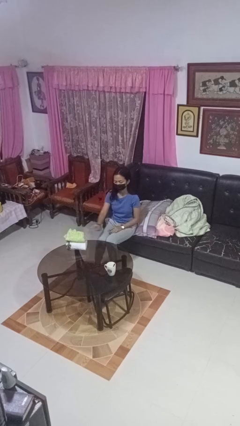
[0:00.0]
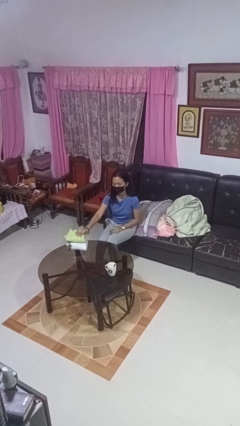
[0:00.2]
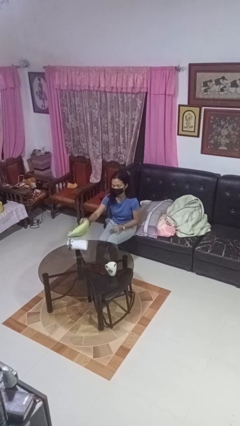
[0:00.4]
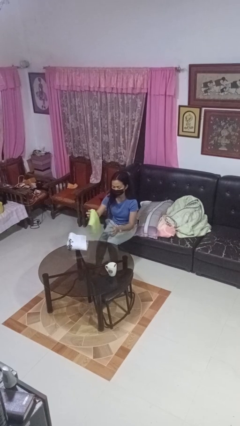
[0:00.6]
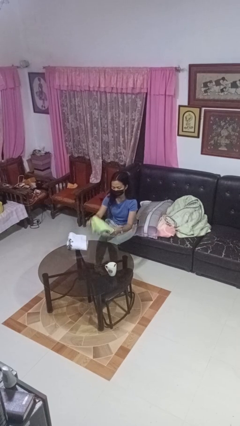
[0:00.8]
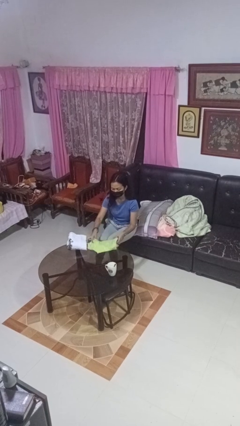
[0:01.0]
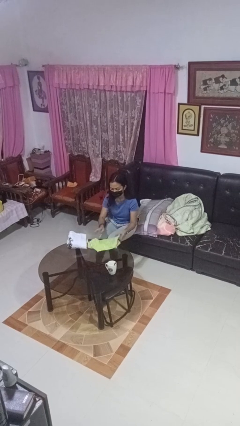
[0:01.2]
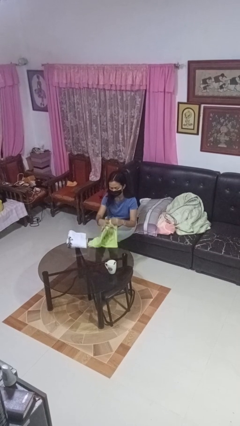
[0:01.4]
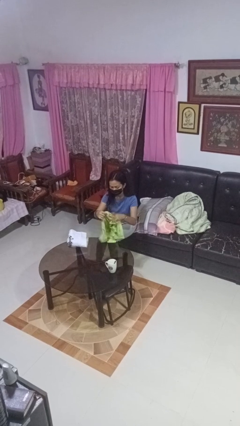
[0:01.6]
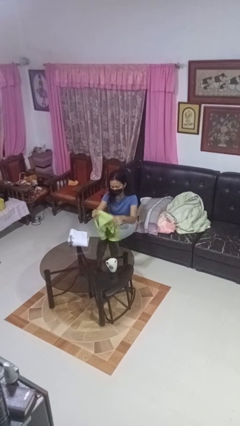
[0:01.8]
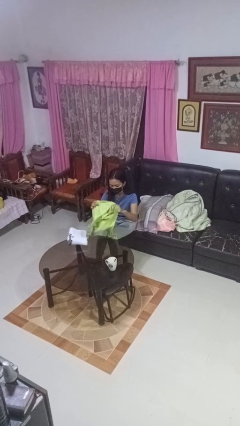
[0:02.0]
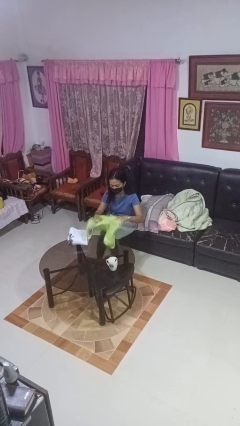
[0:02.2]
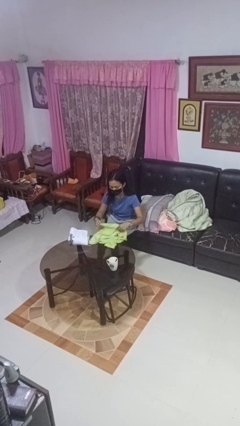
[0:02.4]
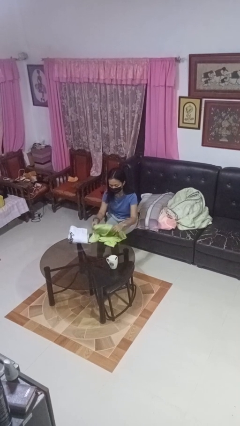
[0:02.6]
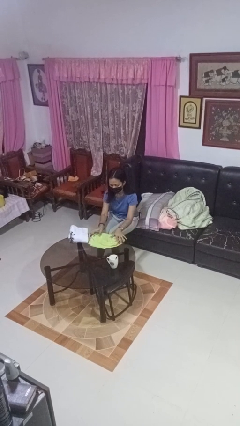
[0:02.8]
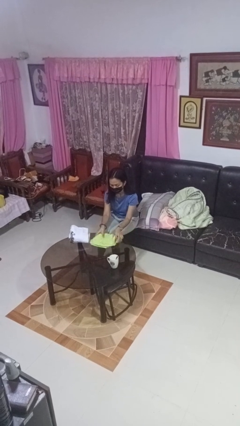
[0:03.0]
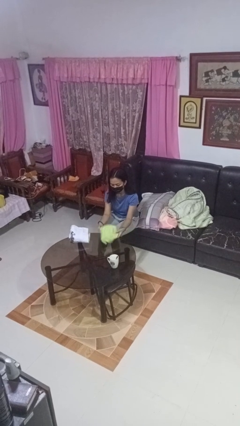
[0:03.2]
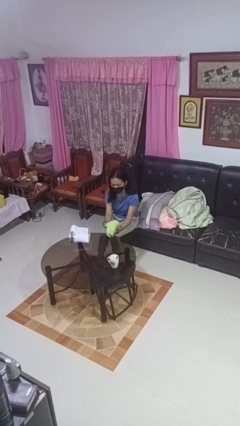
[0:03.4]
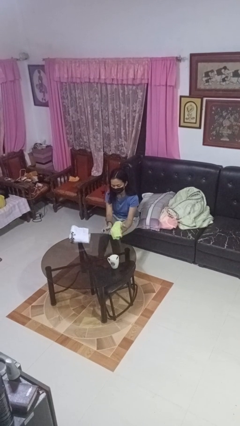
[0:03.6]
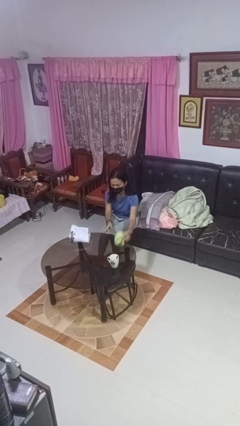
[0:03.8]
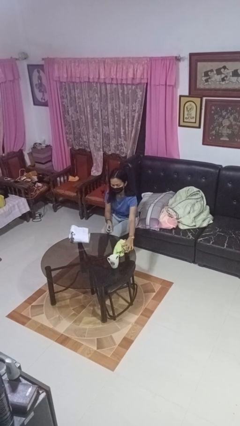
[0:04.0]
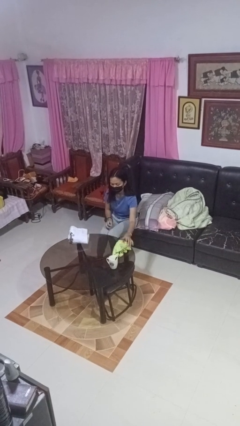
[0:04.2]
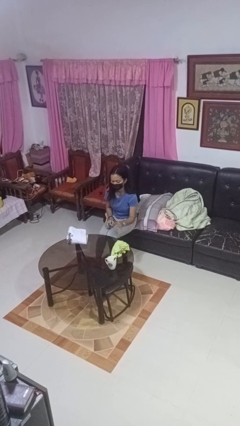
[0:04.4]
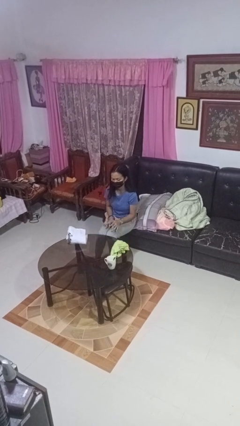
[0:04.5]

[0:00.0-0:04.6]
person folds towel

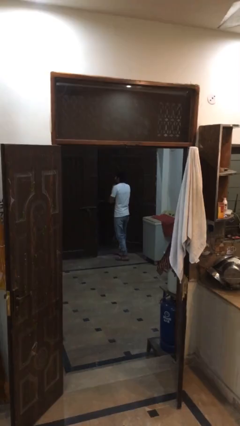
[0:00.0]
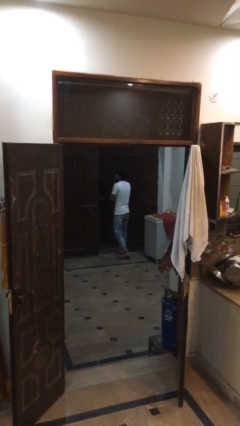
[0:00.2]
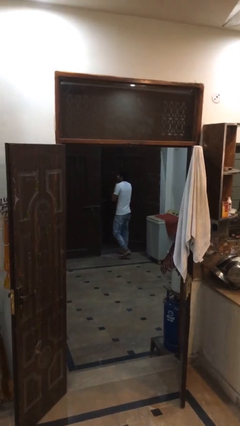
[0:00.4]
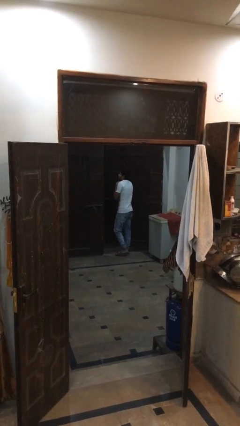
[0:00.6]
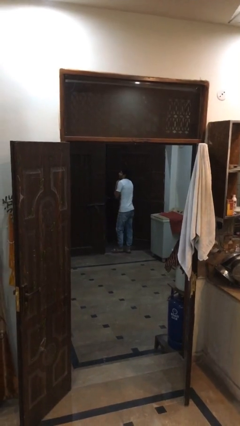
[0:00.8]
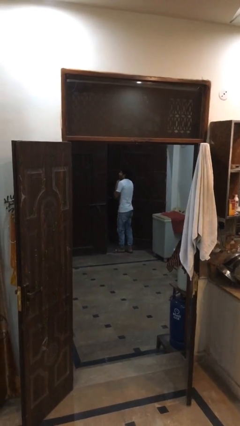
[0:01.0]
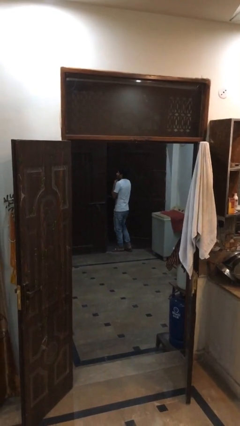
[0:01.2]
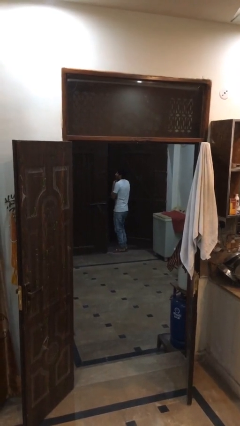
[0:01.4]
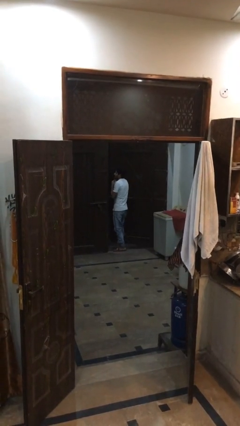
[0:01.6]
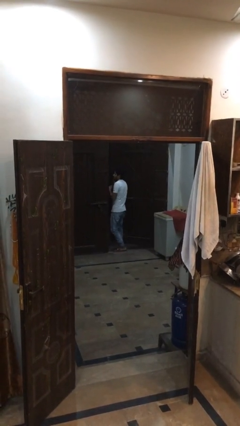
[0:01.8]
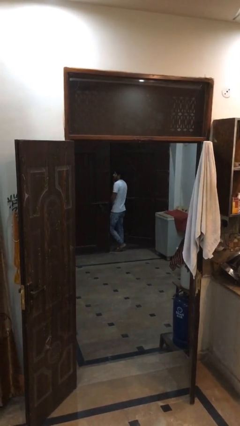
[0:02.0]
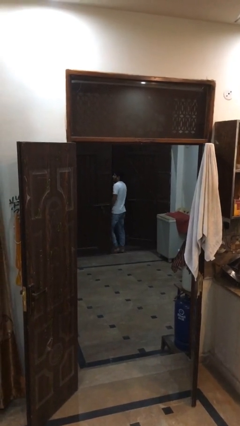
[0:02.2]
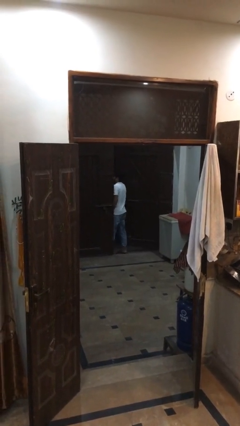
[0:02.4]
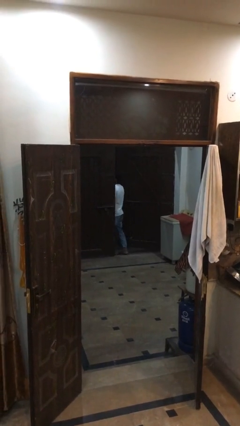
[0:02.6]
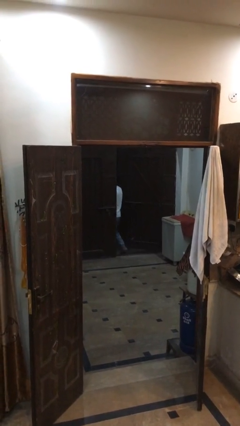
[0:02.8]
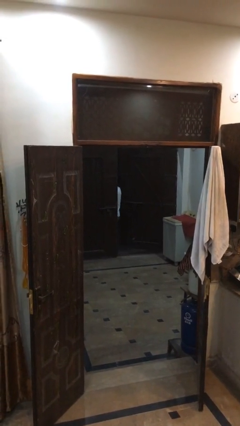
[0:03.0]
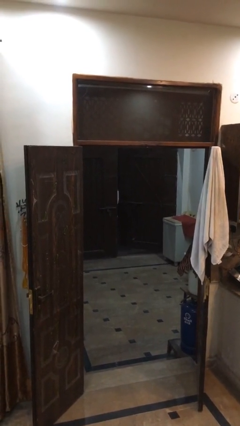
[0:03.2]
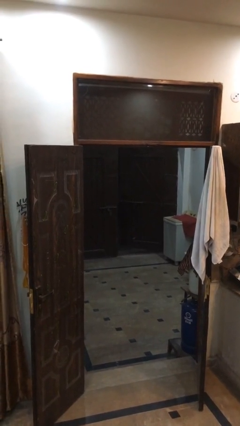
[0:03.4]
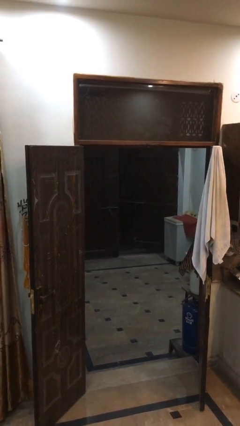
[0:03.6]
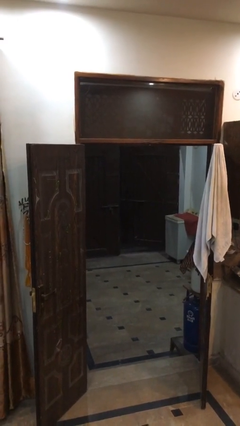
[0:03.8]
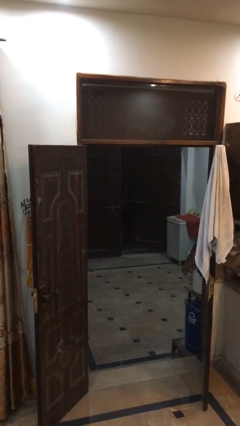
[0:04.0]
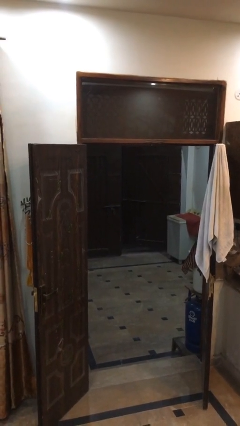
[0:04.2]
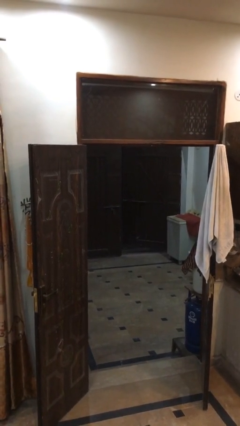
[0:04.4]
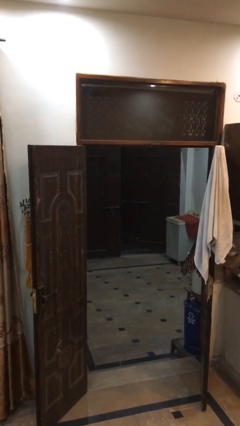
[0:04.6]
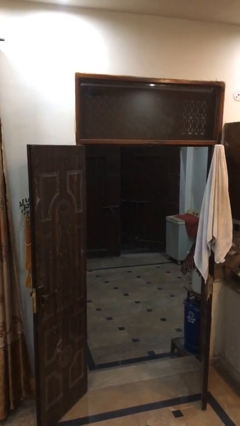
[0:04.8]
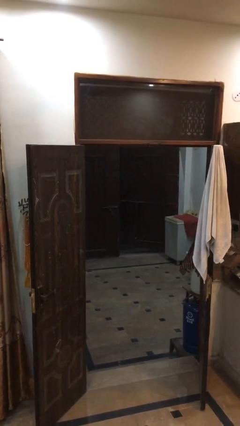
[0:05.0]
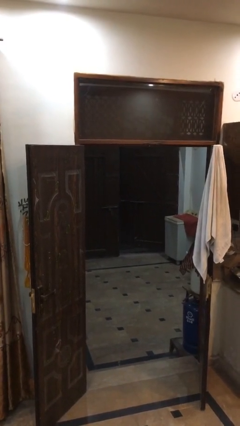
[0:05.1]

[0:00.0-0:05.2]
person exits scene through structure

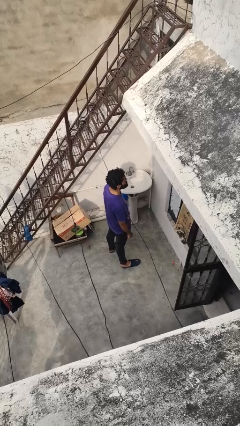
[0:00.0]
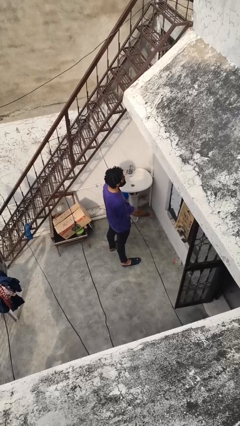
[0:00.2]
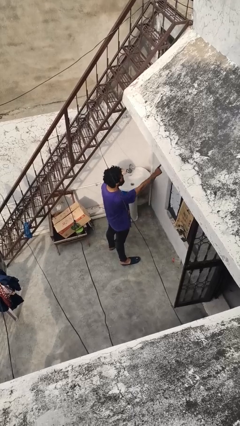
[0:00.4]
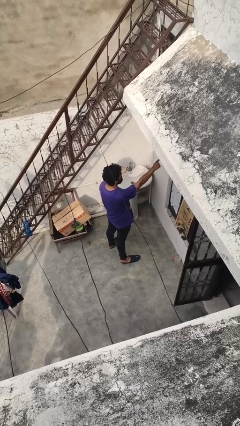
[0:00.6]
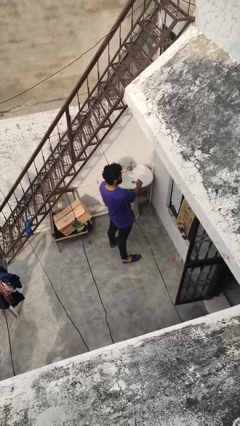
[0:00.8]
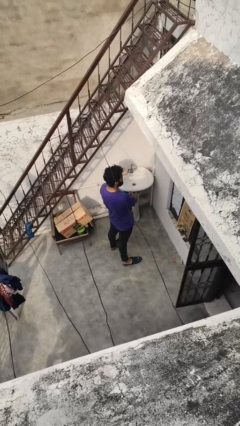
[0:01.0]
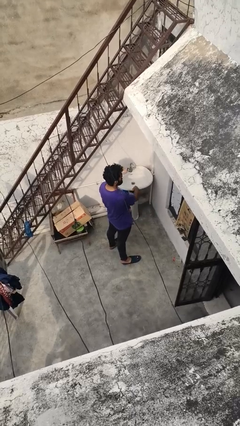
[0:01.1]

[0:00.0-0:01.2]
person gestures behind me

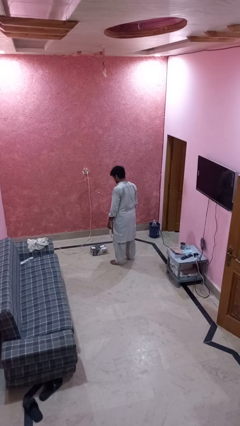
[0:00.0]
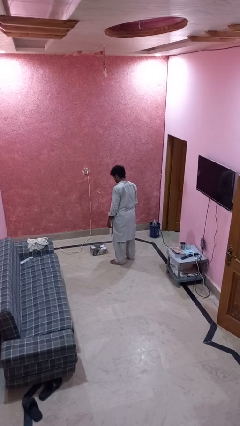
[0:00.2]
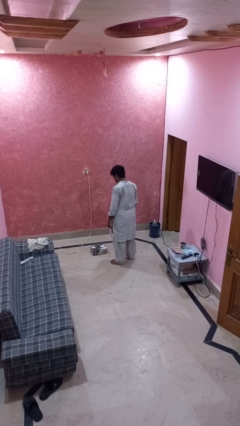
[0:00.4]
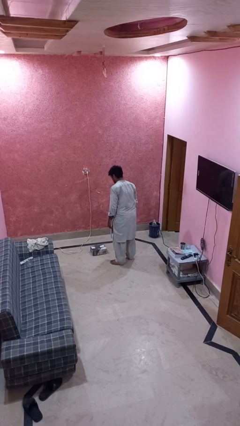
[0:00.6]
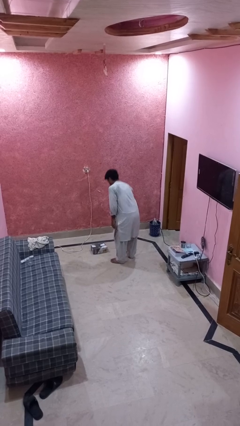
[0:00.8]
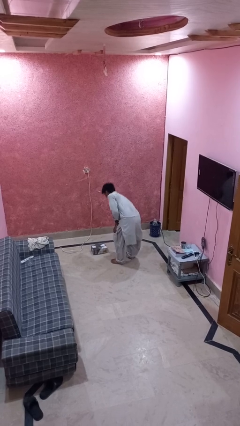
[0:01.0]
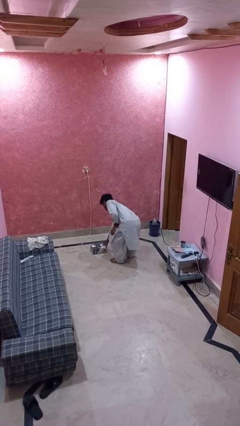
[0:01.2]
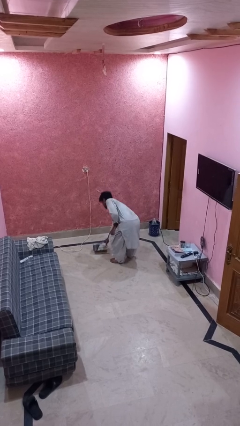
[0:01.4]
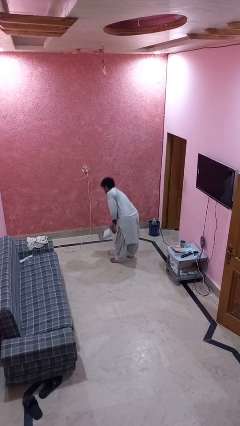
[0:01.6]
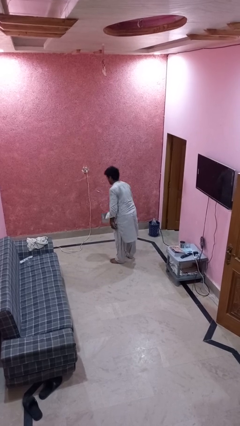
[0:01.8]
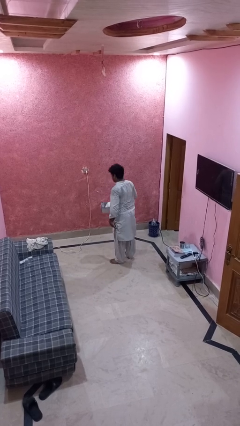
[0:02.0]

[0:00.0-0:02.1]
person picks up object from floor

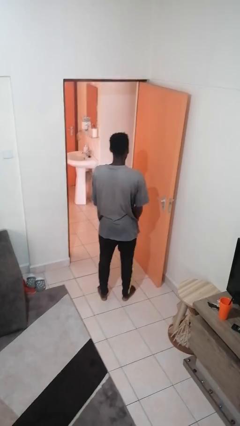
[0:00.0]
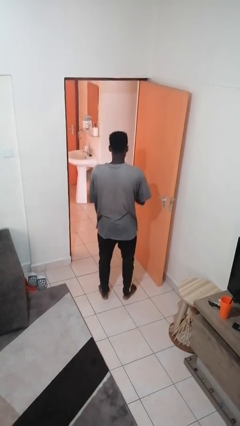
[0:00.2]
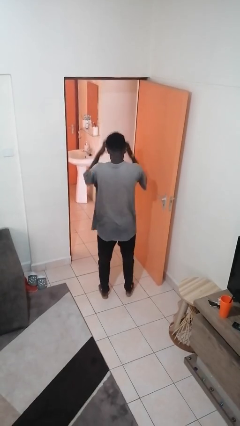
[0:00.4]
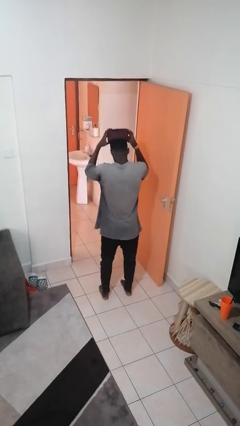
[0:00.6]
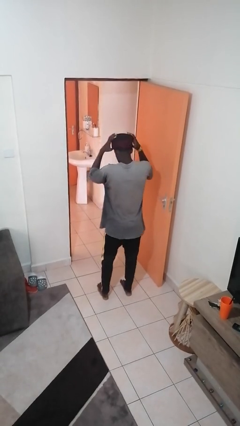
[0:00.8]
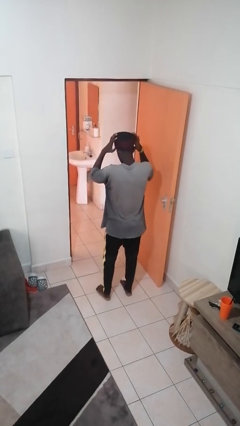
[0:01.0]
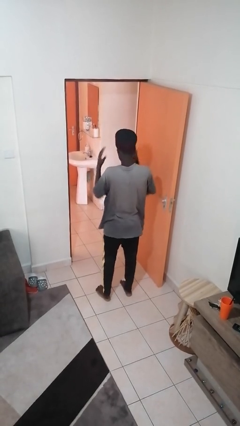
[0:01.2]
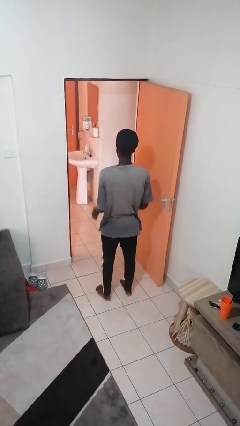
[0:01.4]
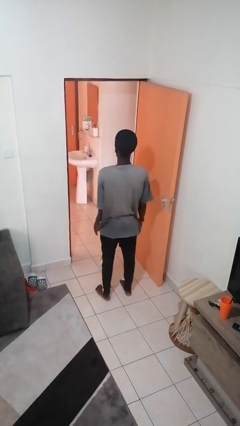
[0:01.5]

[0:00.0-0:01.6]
person puts on hat

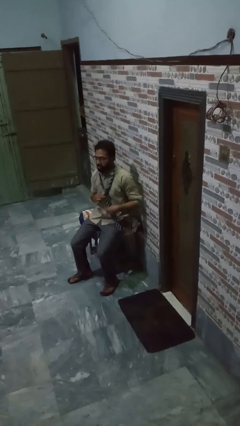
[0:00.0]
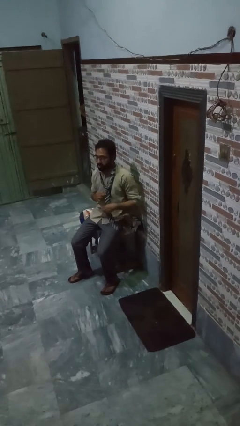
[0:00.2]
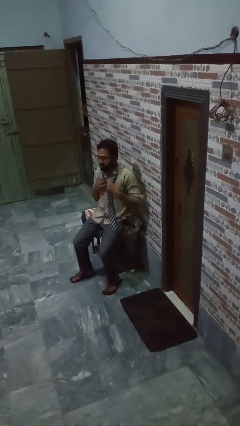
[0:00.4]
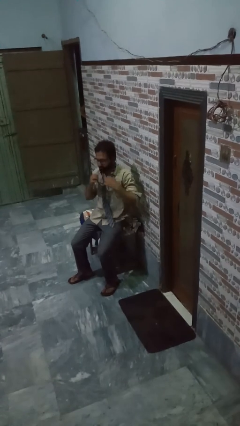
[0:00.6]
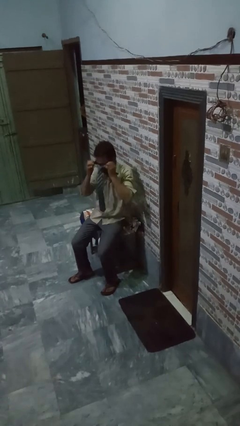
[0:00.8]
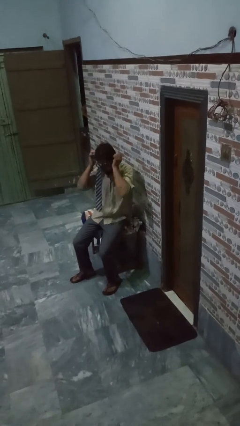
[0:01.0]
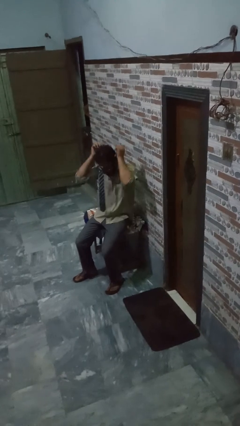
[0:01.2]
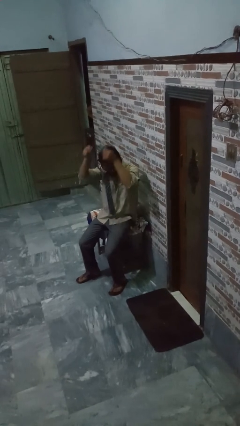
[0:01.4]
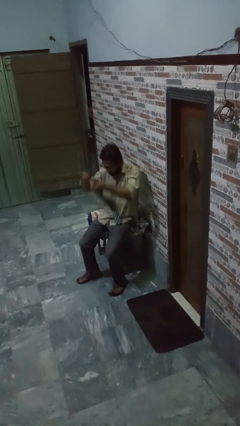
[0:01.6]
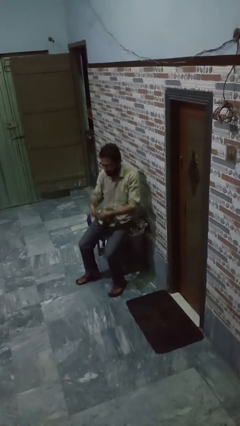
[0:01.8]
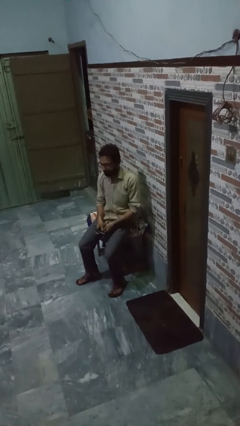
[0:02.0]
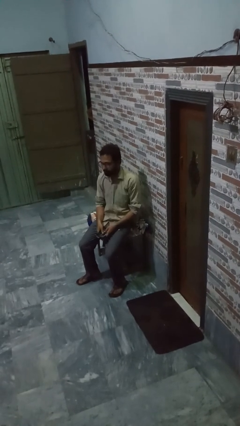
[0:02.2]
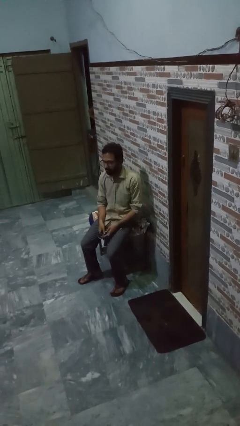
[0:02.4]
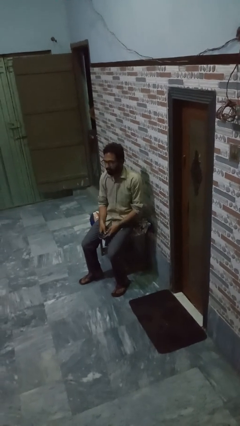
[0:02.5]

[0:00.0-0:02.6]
person takes off necktie

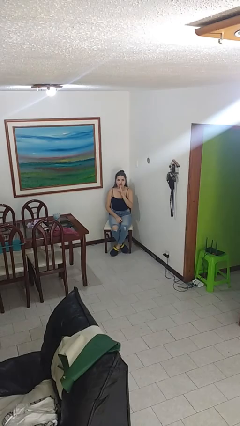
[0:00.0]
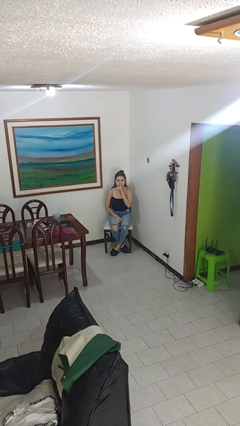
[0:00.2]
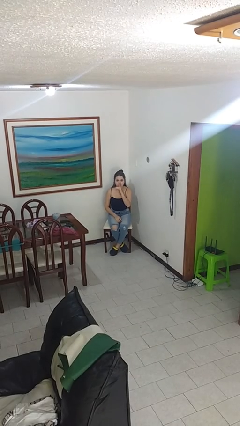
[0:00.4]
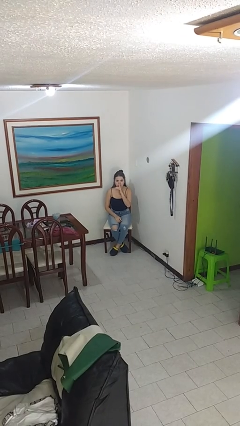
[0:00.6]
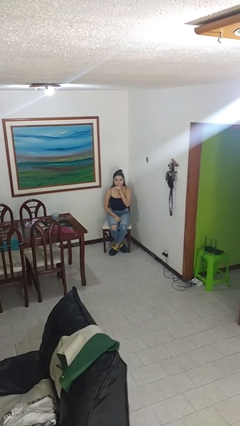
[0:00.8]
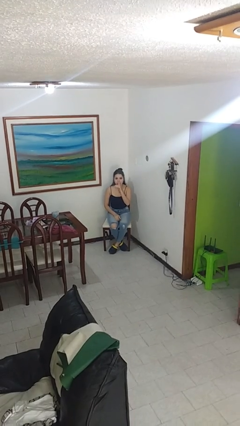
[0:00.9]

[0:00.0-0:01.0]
person gestures be quiet
